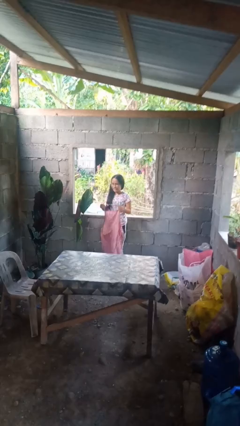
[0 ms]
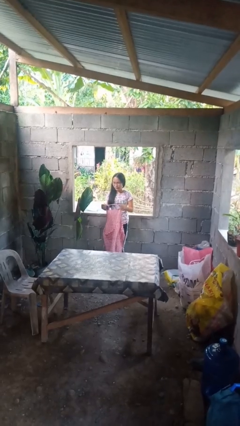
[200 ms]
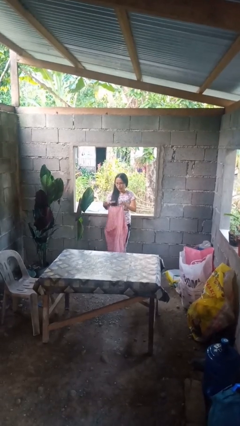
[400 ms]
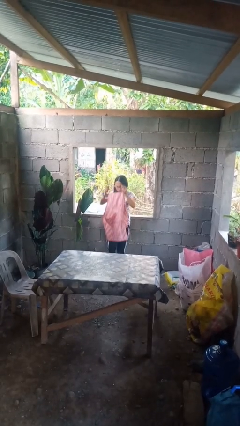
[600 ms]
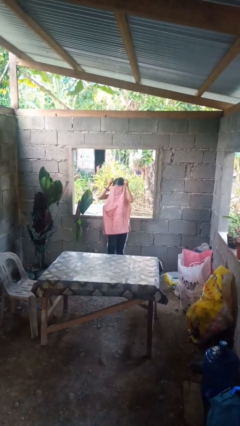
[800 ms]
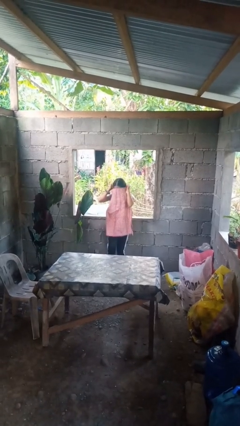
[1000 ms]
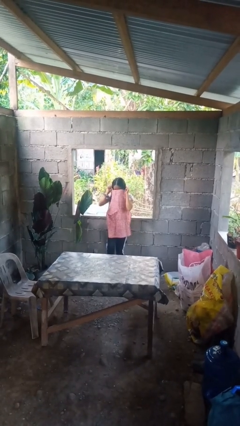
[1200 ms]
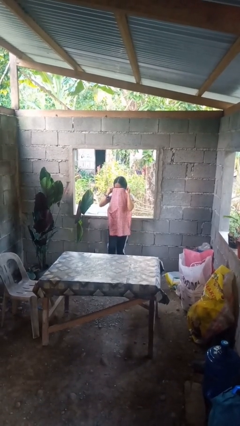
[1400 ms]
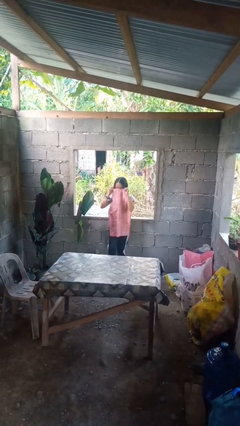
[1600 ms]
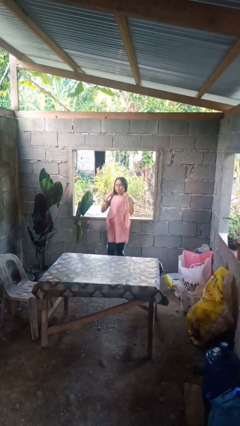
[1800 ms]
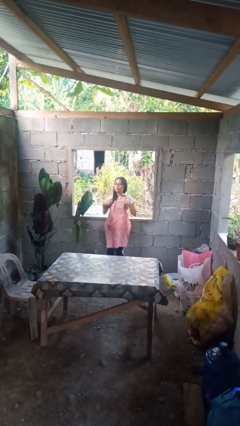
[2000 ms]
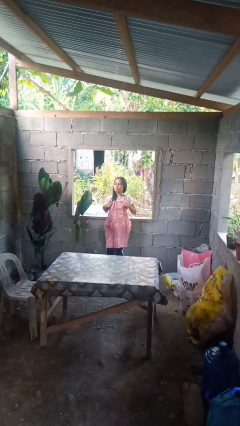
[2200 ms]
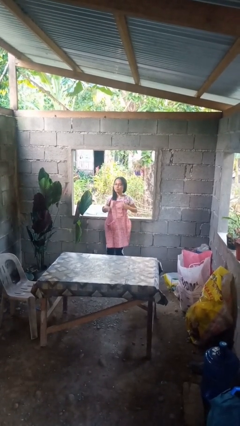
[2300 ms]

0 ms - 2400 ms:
person puts on apron

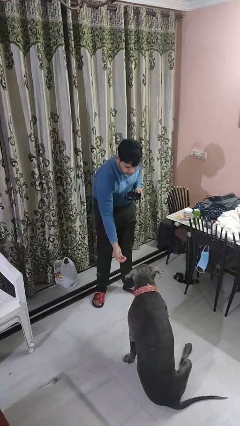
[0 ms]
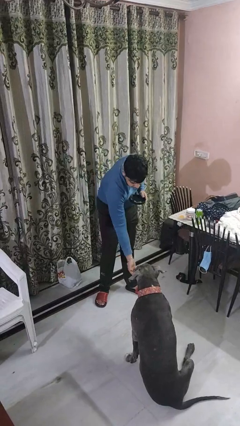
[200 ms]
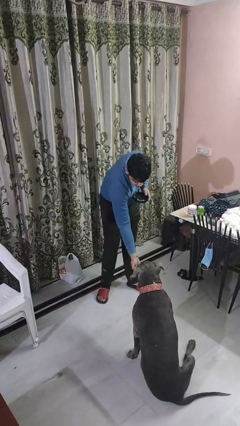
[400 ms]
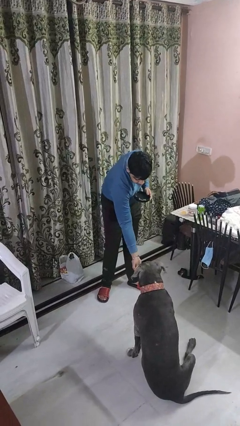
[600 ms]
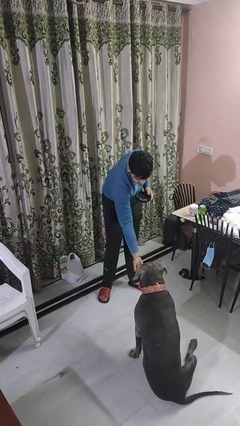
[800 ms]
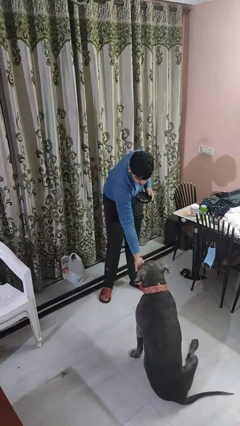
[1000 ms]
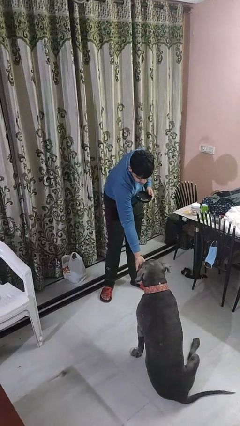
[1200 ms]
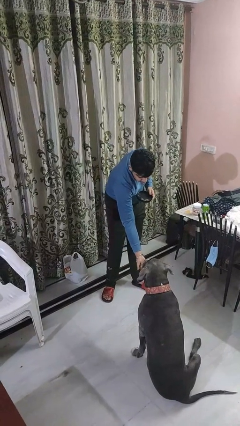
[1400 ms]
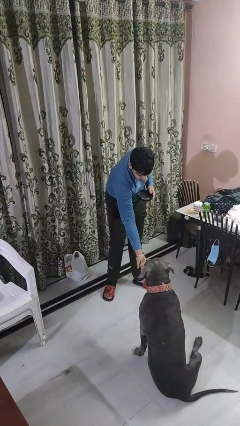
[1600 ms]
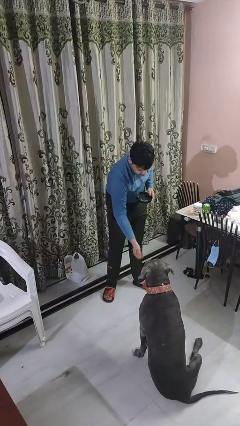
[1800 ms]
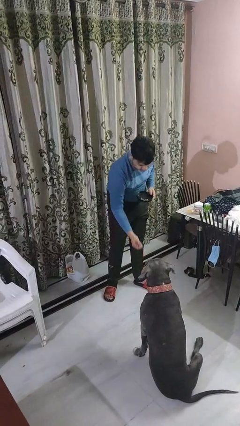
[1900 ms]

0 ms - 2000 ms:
person feeds dog

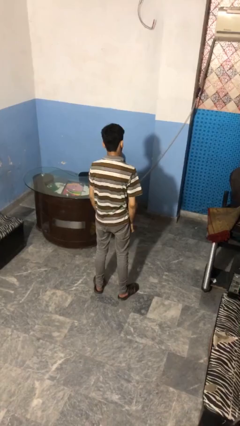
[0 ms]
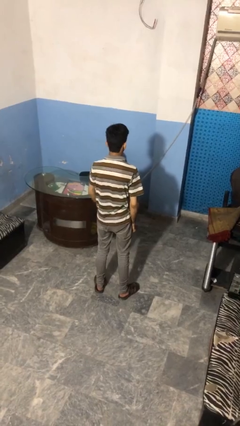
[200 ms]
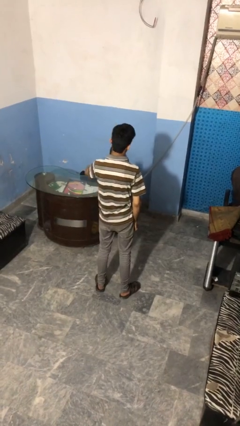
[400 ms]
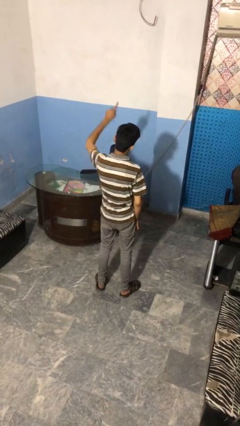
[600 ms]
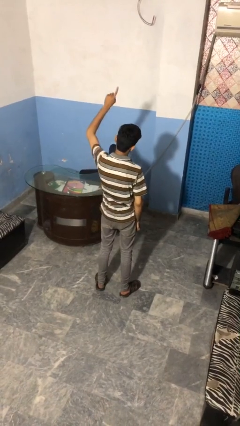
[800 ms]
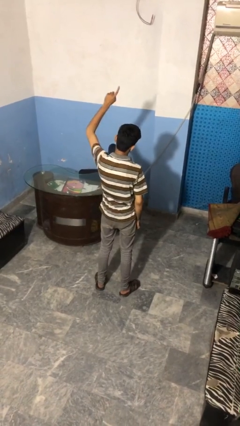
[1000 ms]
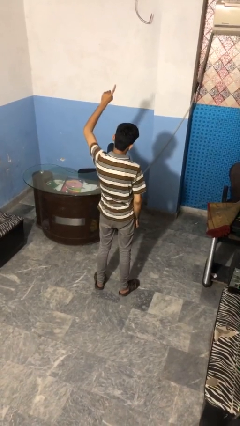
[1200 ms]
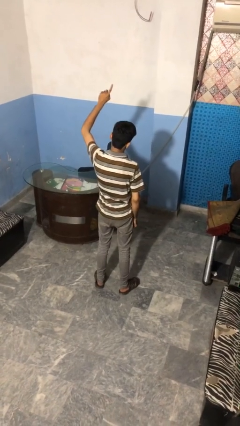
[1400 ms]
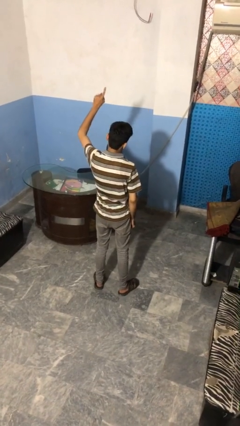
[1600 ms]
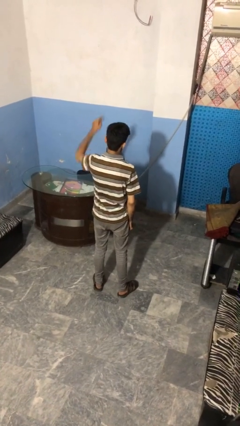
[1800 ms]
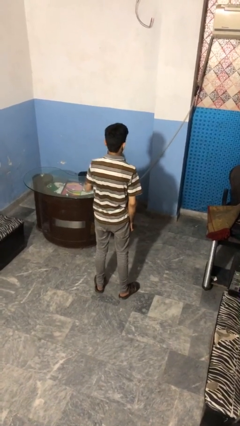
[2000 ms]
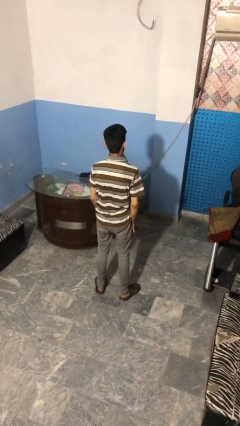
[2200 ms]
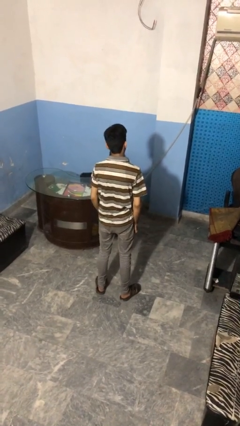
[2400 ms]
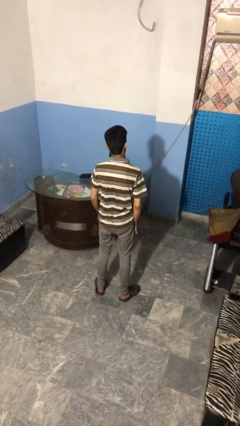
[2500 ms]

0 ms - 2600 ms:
person gestures number one

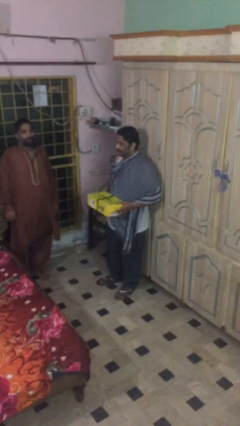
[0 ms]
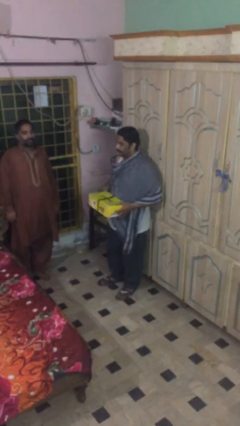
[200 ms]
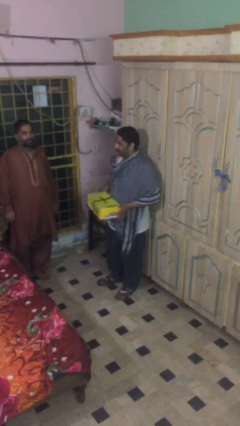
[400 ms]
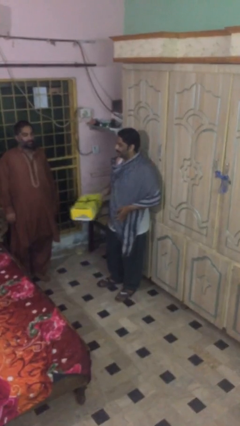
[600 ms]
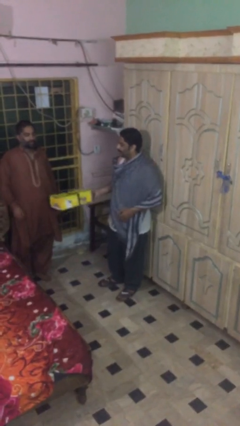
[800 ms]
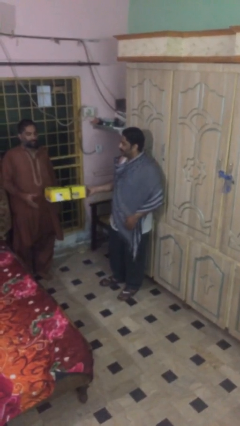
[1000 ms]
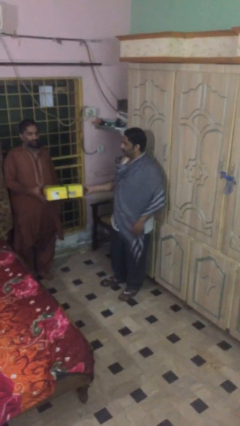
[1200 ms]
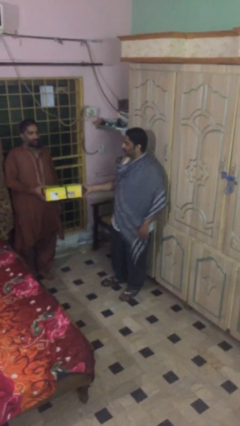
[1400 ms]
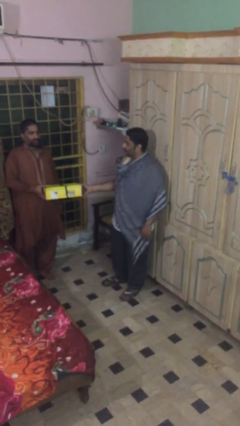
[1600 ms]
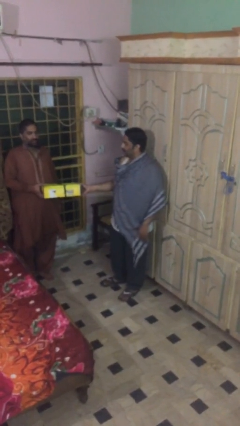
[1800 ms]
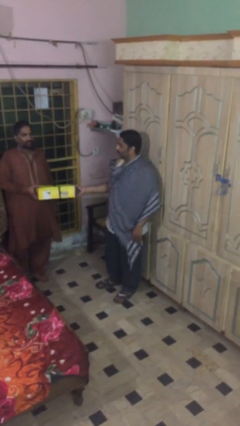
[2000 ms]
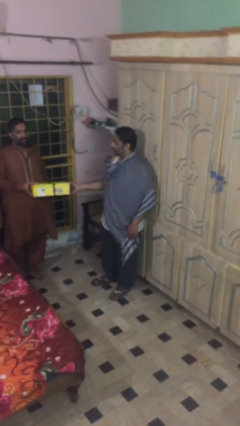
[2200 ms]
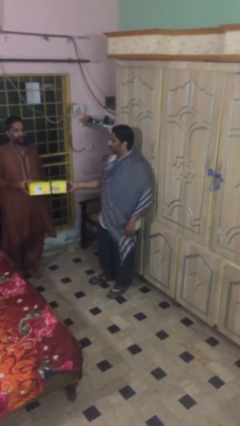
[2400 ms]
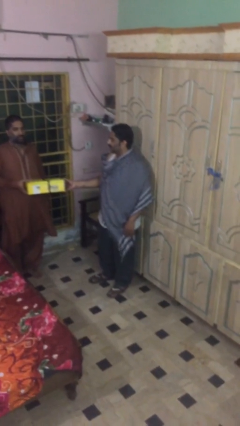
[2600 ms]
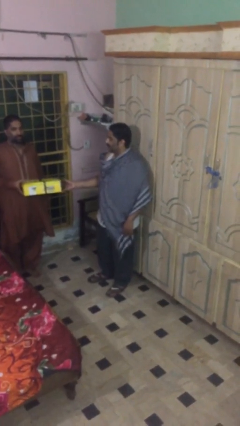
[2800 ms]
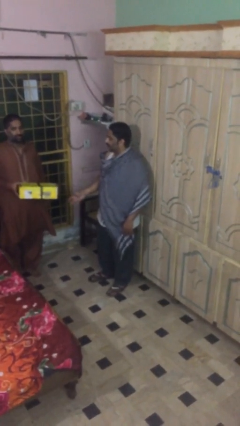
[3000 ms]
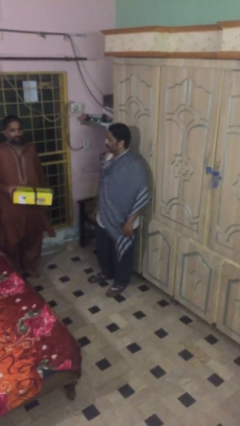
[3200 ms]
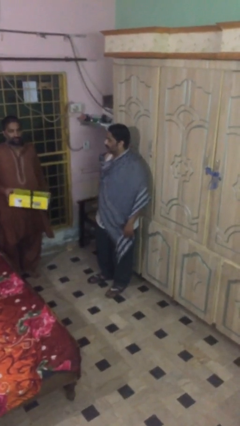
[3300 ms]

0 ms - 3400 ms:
person transfers object to person

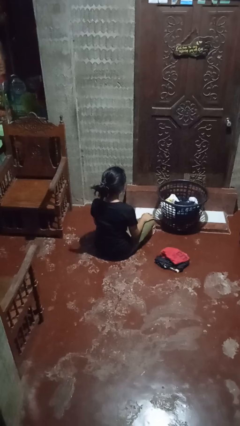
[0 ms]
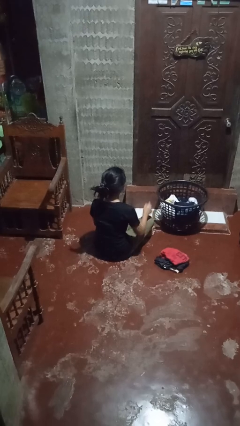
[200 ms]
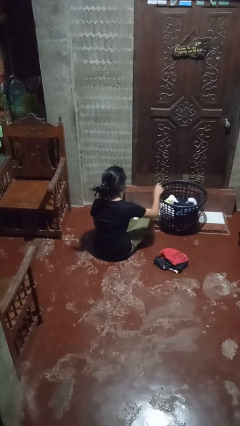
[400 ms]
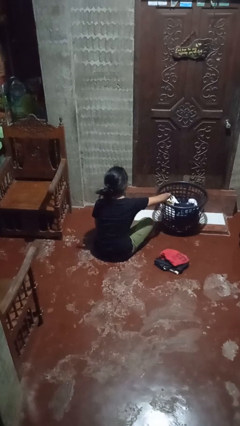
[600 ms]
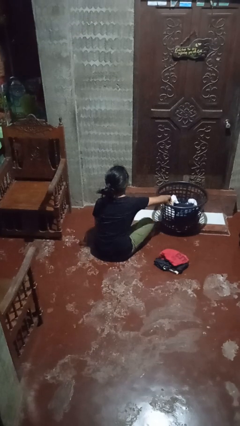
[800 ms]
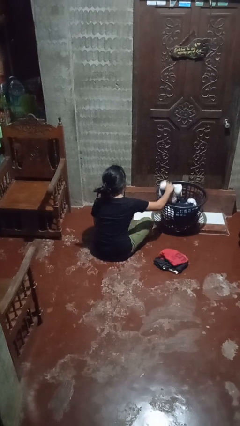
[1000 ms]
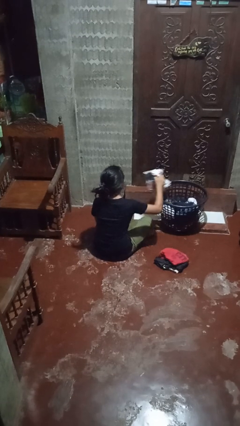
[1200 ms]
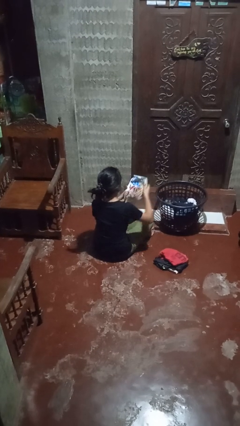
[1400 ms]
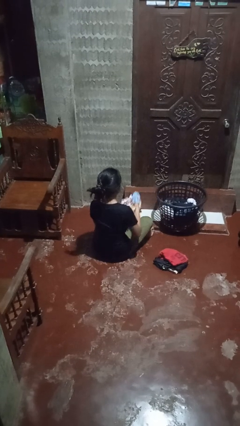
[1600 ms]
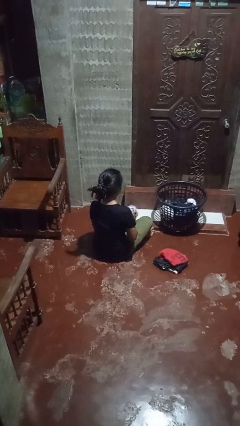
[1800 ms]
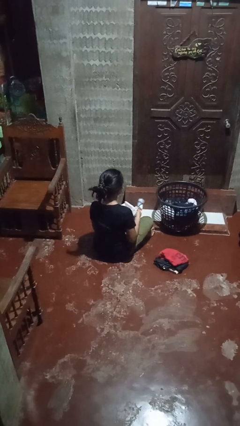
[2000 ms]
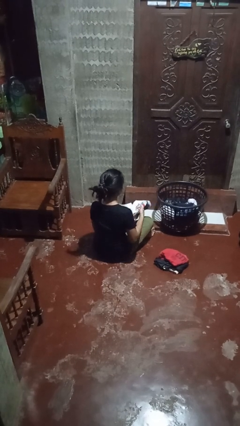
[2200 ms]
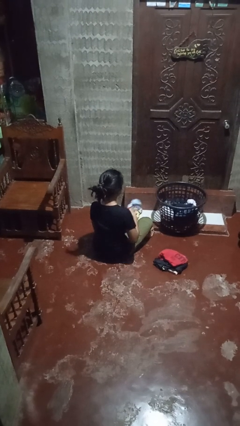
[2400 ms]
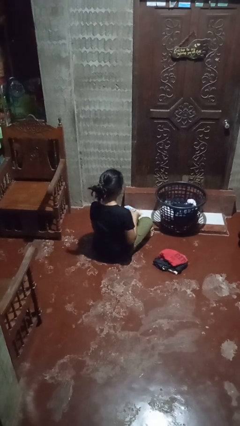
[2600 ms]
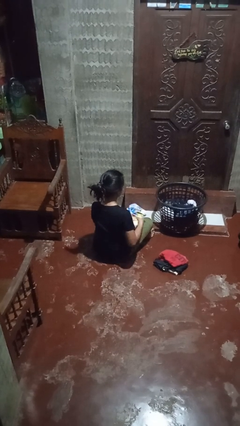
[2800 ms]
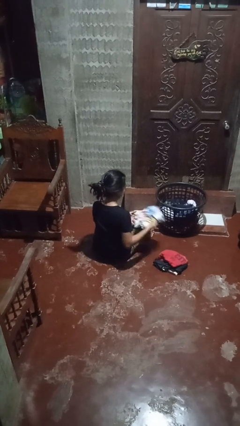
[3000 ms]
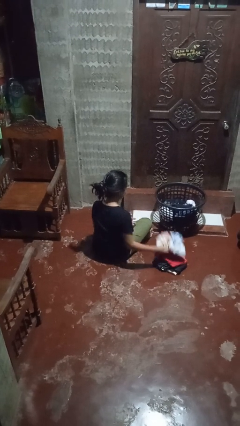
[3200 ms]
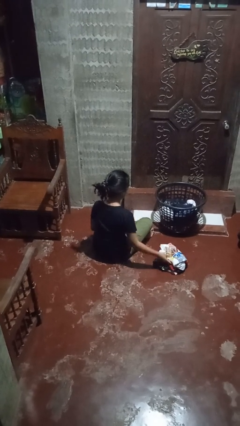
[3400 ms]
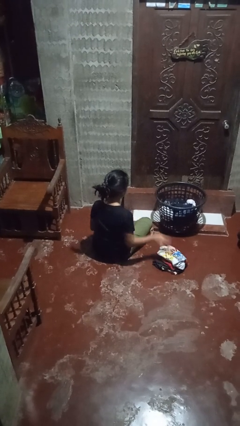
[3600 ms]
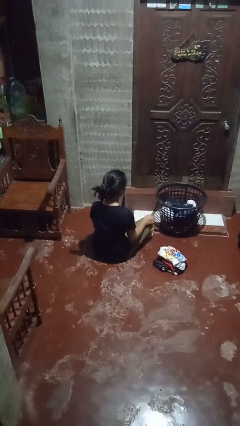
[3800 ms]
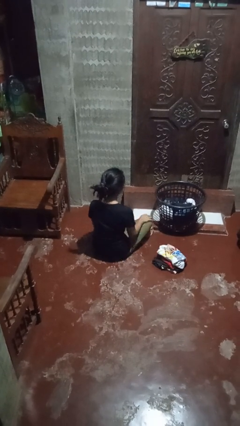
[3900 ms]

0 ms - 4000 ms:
person folds shirt

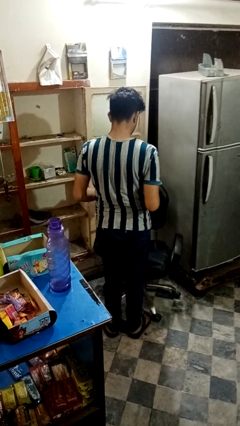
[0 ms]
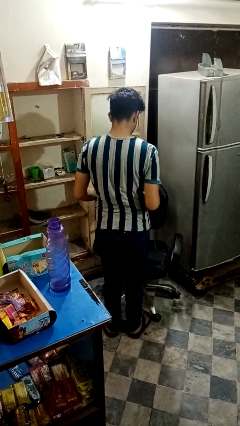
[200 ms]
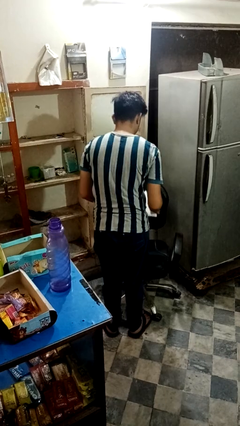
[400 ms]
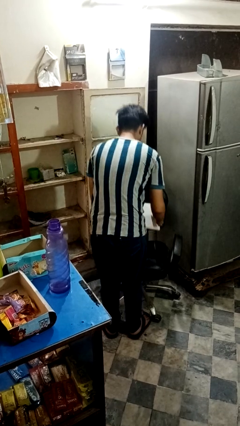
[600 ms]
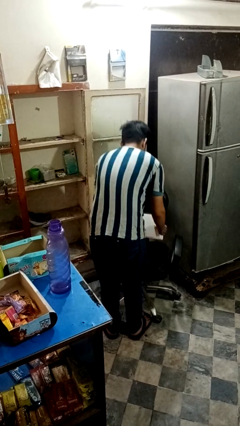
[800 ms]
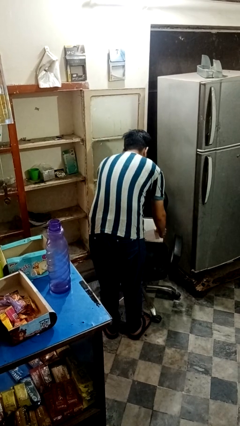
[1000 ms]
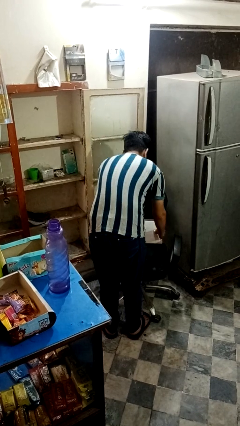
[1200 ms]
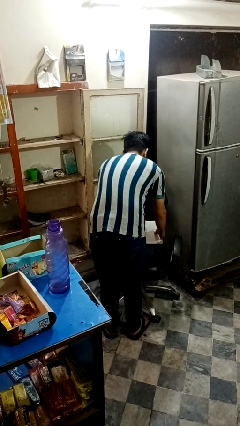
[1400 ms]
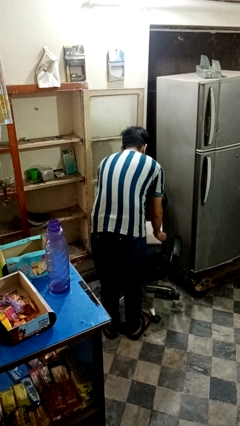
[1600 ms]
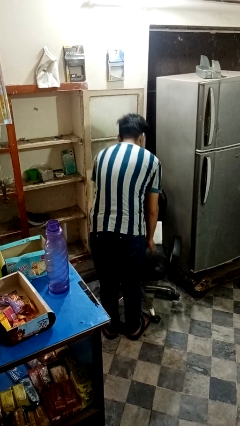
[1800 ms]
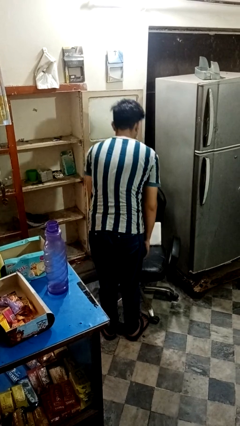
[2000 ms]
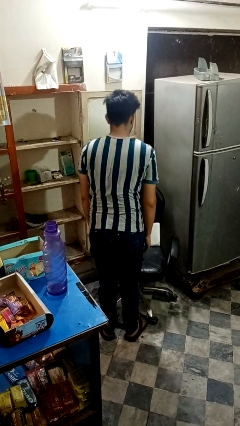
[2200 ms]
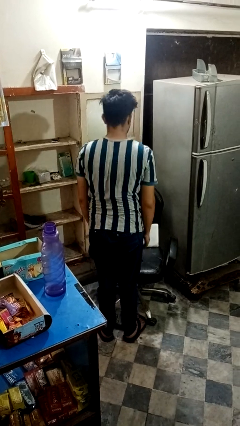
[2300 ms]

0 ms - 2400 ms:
person puts down object on couch

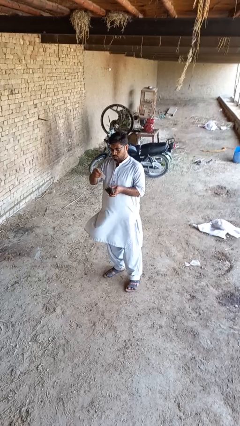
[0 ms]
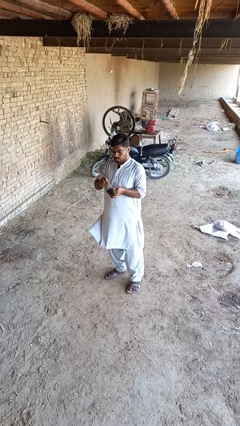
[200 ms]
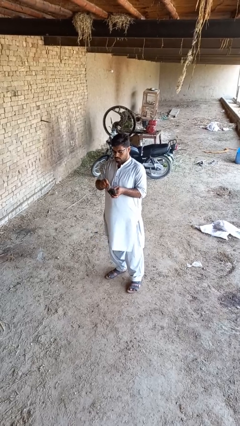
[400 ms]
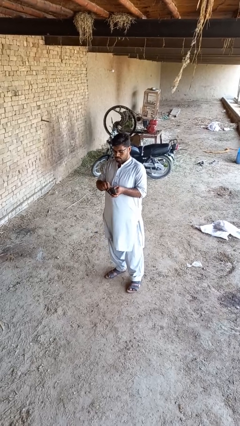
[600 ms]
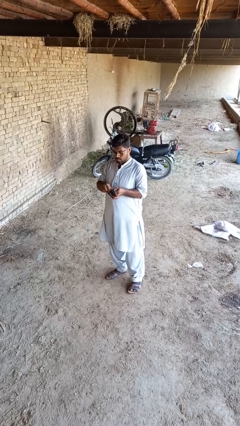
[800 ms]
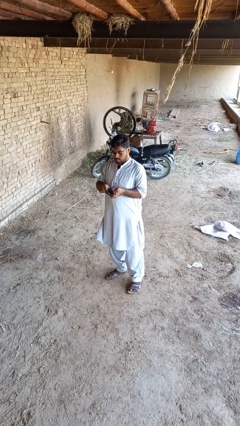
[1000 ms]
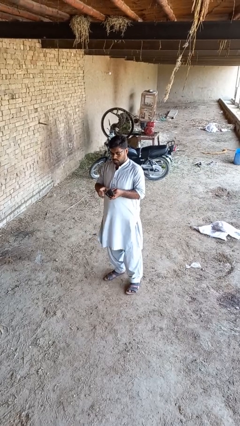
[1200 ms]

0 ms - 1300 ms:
person puts object into purse
